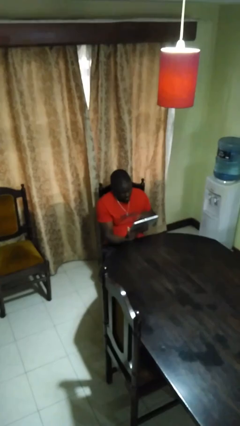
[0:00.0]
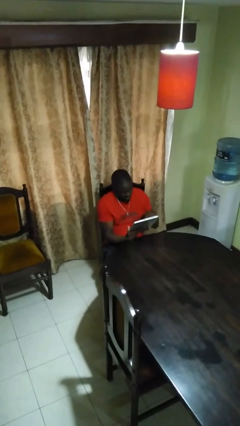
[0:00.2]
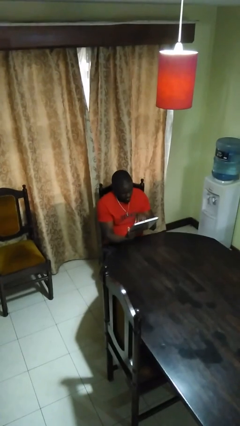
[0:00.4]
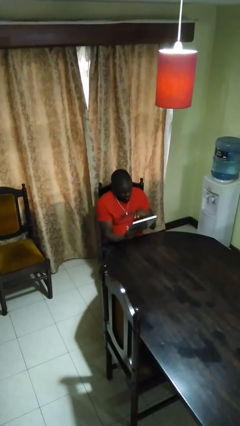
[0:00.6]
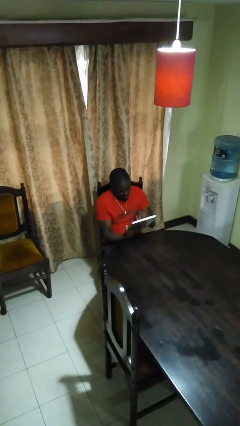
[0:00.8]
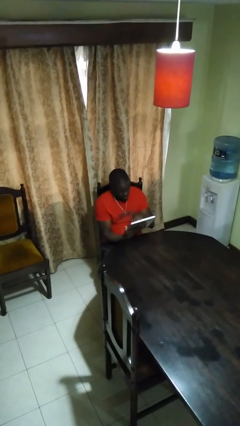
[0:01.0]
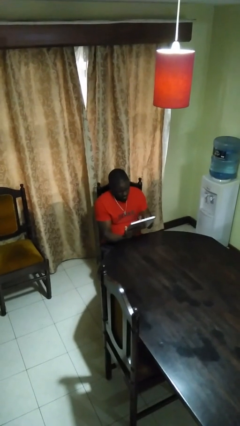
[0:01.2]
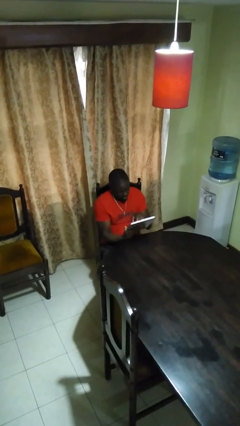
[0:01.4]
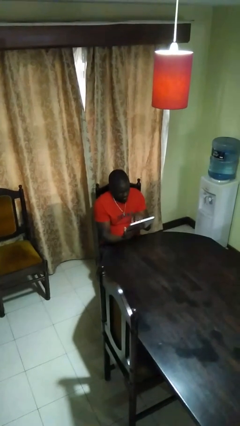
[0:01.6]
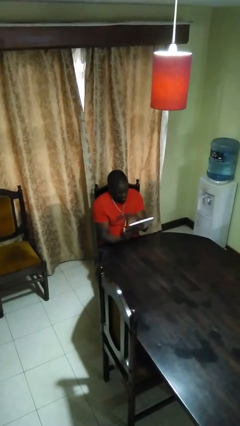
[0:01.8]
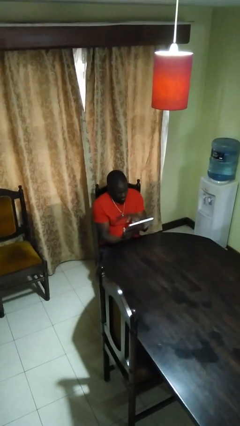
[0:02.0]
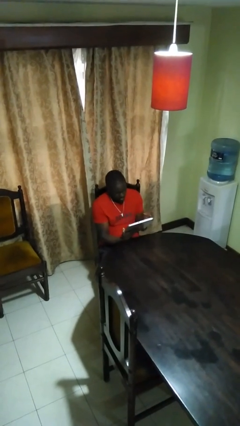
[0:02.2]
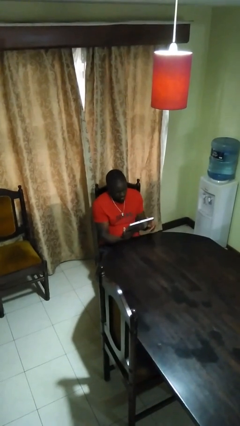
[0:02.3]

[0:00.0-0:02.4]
person interacts with tablet

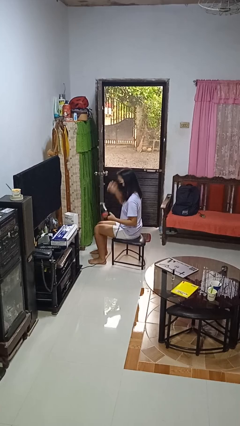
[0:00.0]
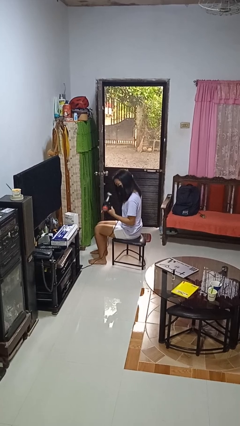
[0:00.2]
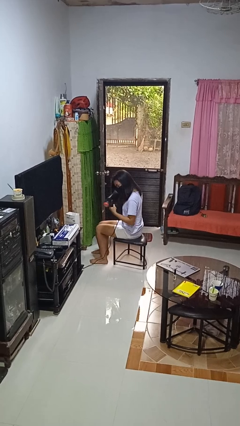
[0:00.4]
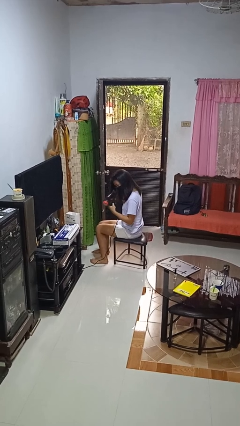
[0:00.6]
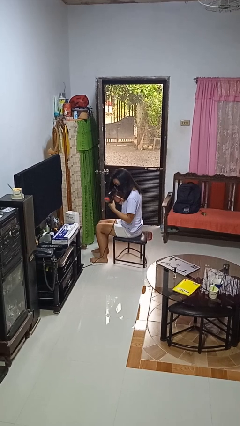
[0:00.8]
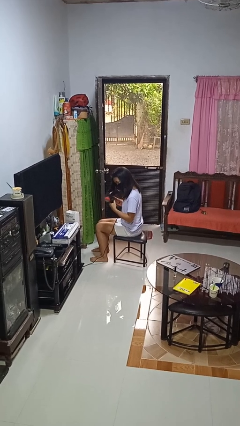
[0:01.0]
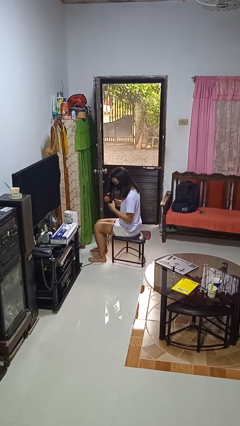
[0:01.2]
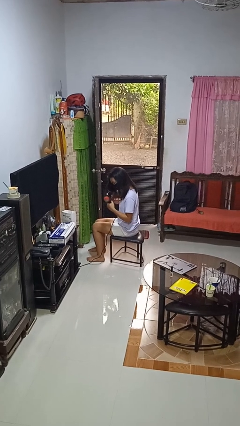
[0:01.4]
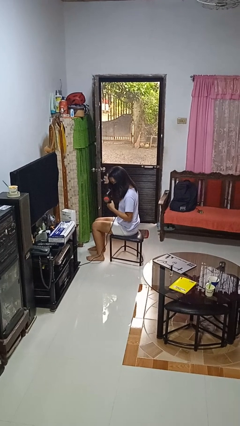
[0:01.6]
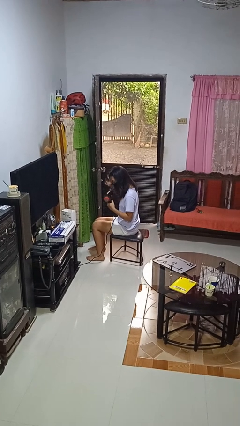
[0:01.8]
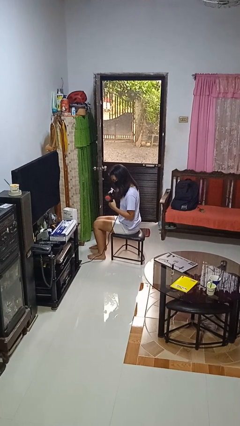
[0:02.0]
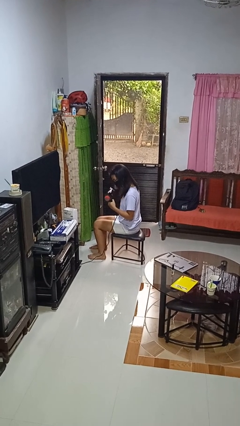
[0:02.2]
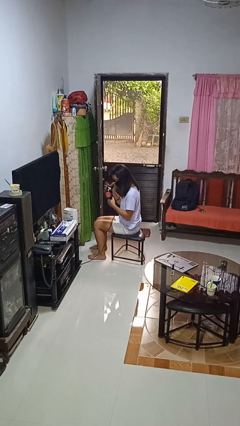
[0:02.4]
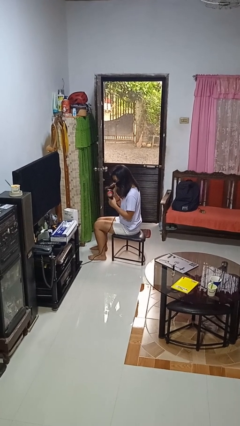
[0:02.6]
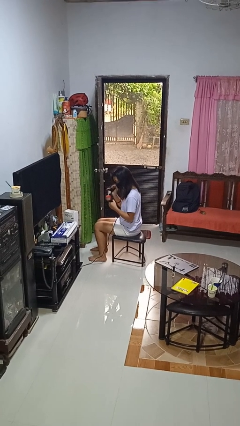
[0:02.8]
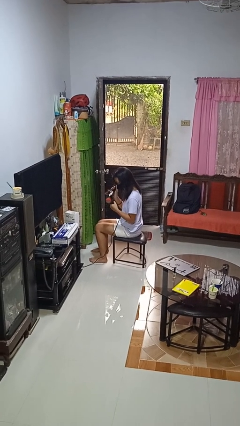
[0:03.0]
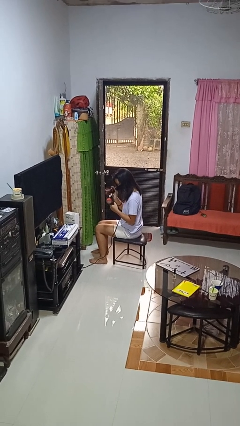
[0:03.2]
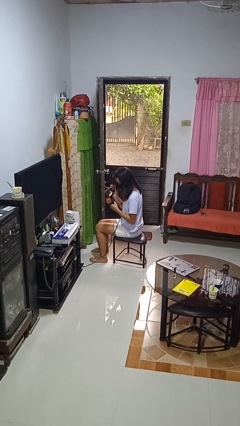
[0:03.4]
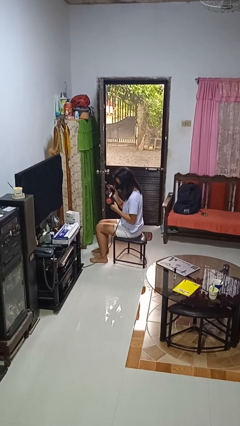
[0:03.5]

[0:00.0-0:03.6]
person dries hair with hairdryer

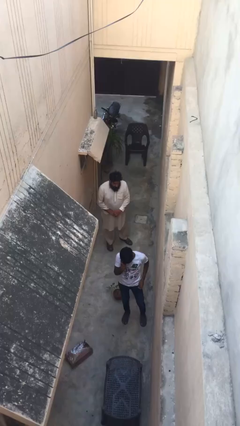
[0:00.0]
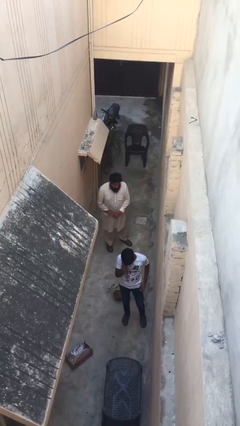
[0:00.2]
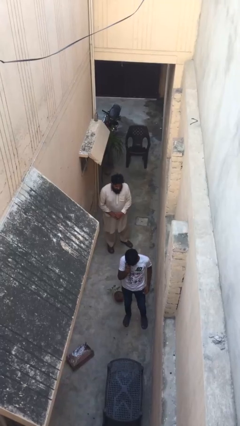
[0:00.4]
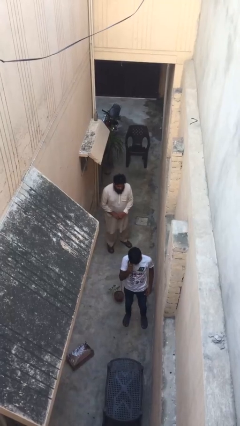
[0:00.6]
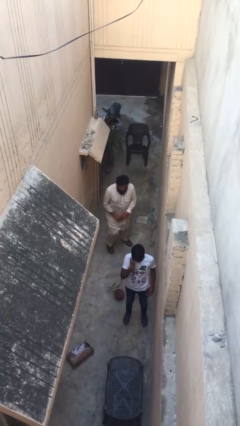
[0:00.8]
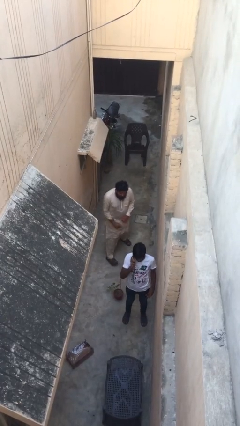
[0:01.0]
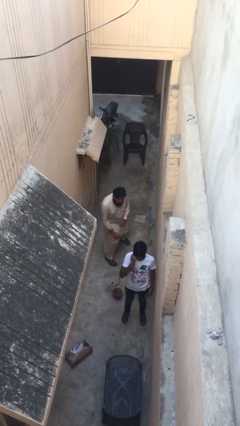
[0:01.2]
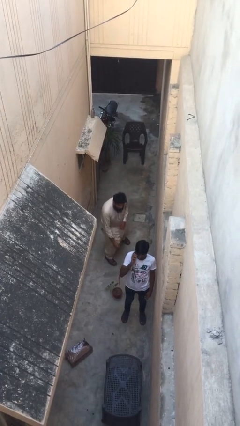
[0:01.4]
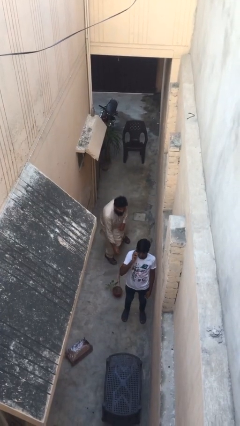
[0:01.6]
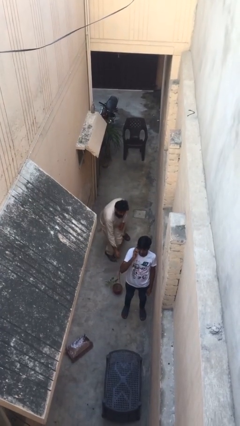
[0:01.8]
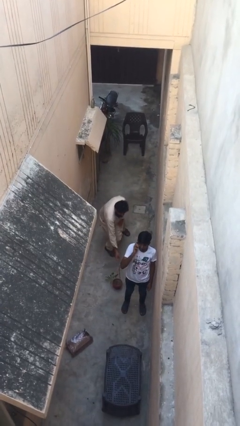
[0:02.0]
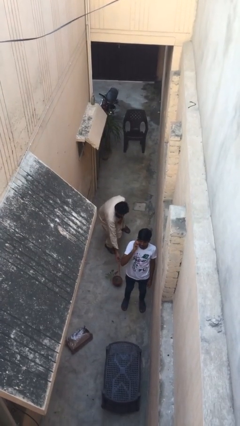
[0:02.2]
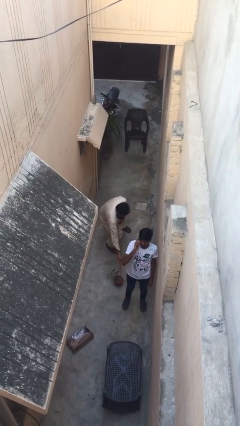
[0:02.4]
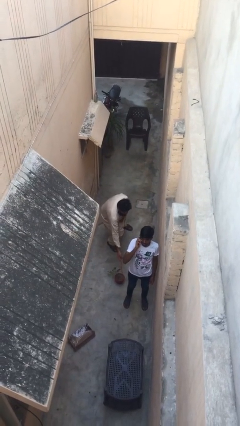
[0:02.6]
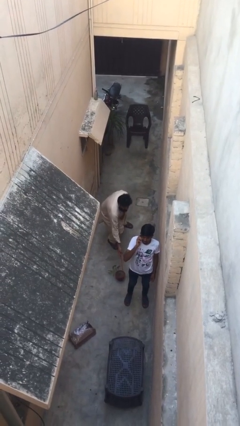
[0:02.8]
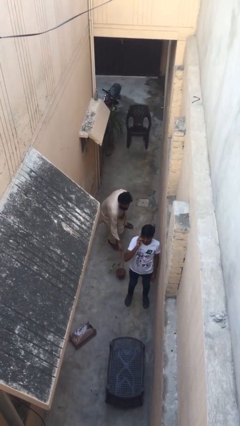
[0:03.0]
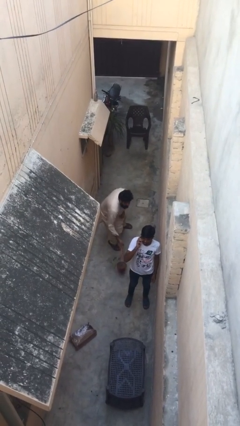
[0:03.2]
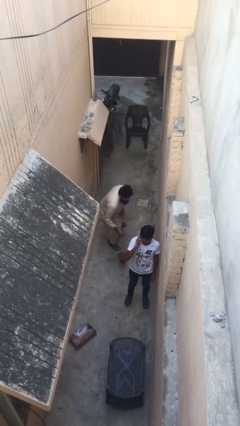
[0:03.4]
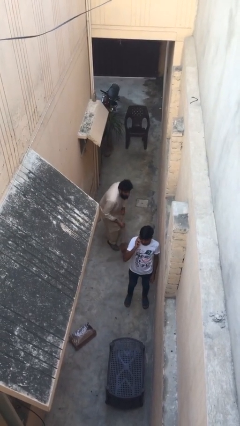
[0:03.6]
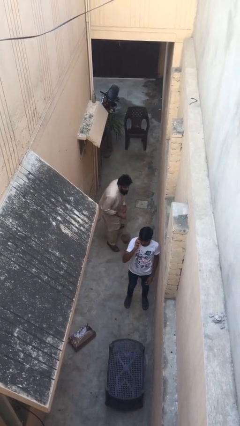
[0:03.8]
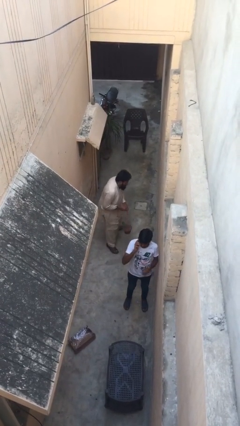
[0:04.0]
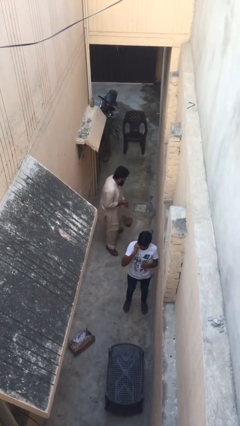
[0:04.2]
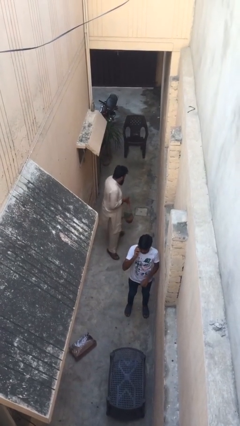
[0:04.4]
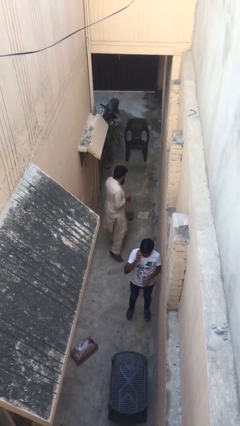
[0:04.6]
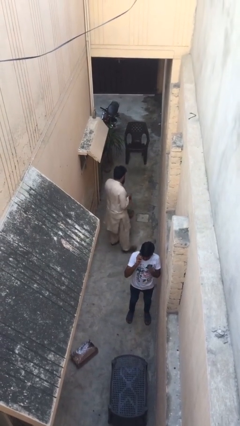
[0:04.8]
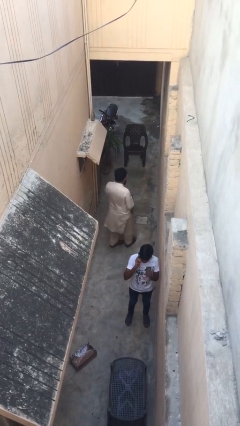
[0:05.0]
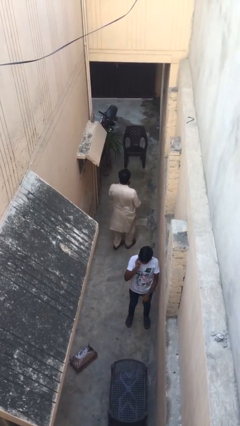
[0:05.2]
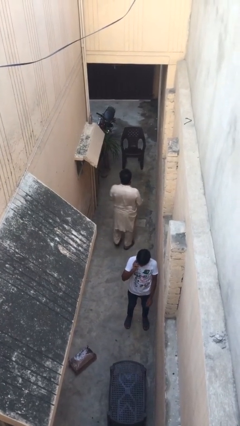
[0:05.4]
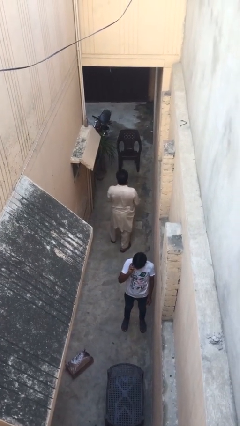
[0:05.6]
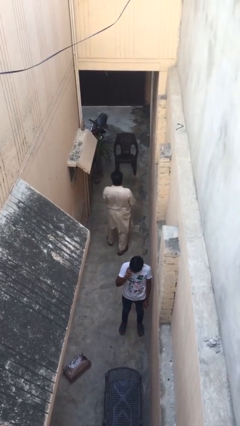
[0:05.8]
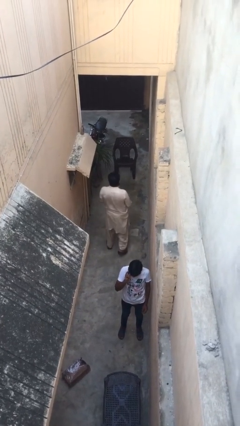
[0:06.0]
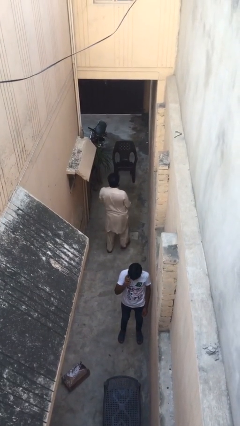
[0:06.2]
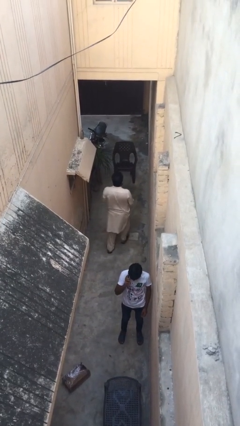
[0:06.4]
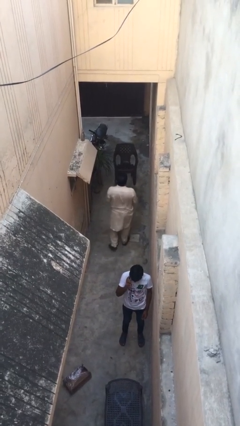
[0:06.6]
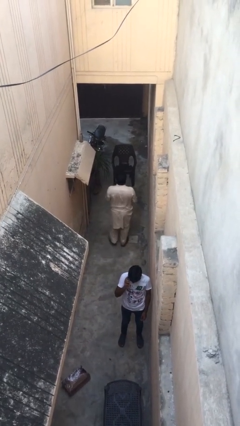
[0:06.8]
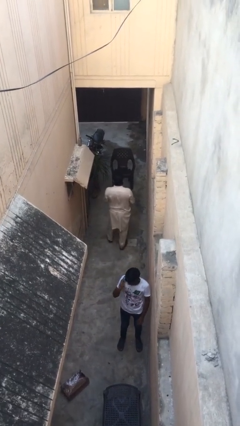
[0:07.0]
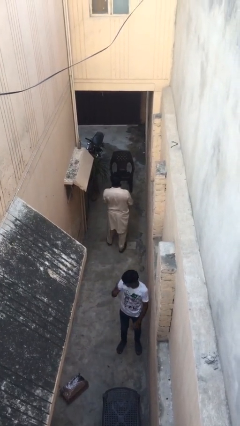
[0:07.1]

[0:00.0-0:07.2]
person steals object from person

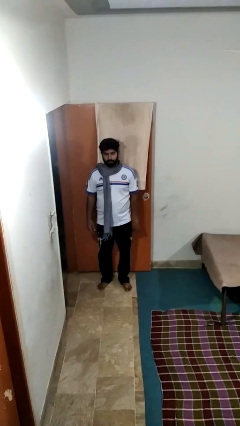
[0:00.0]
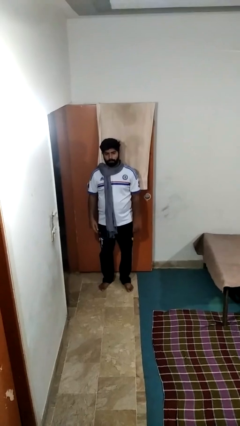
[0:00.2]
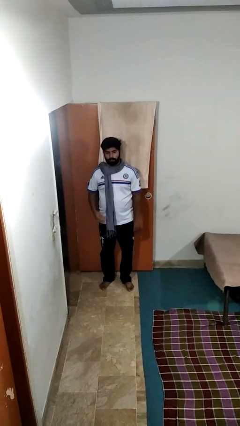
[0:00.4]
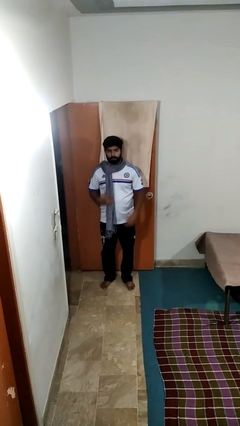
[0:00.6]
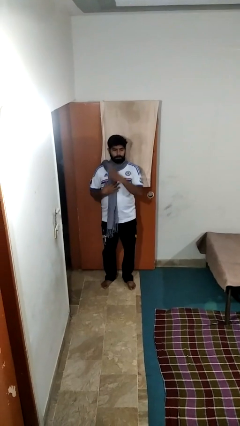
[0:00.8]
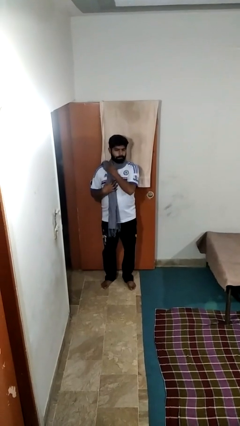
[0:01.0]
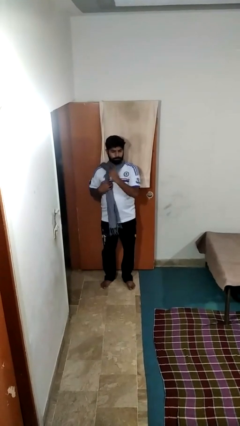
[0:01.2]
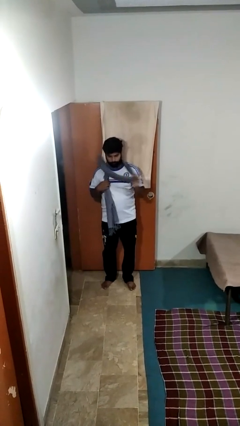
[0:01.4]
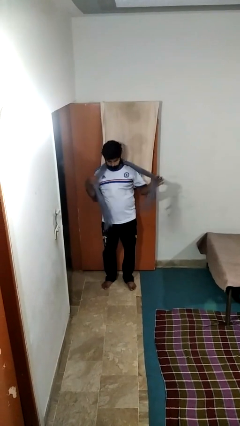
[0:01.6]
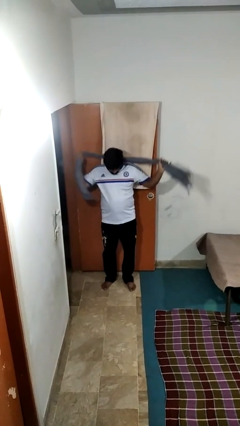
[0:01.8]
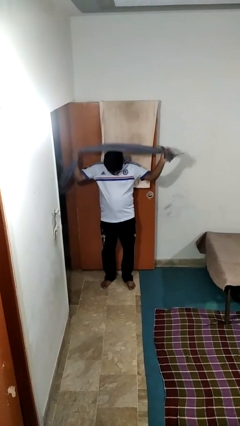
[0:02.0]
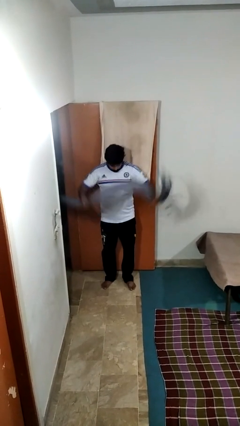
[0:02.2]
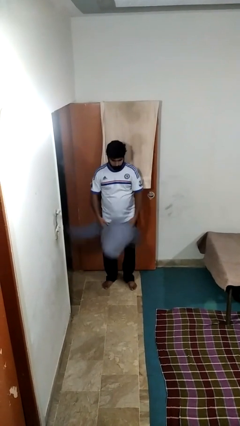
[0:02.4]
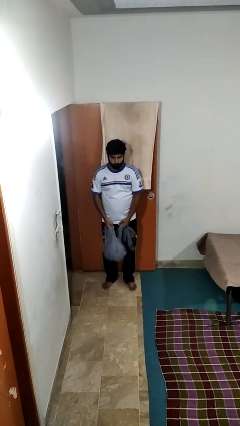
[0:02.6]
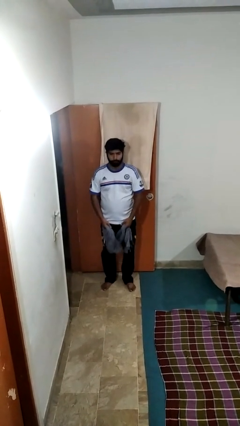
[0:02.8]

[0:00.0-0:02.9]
person takes off scarf

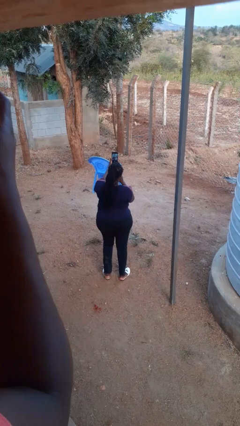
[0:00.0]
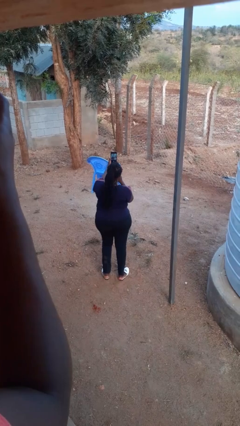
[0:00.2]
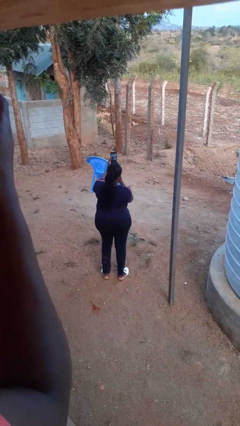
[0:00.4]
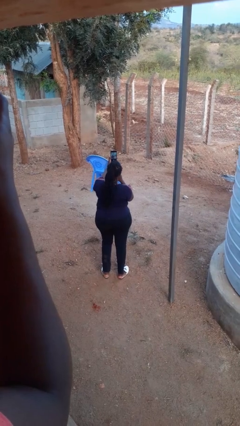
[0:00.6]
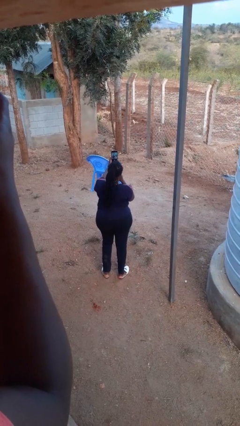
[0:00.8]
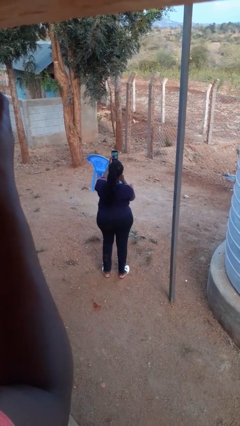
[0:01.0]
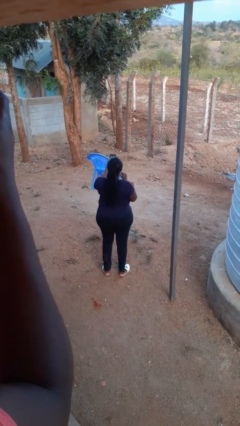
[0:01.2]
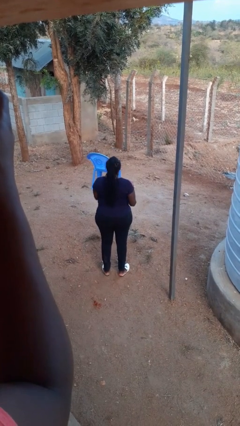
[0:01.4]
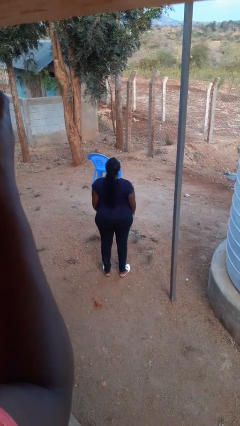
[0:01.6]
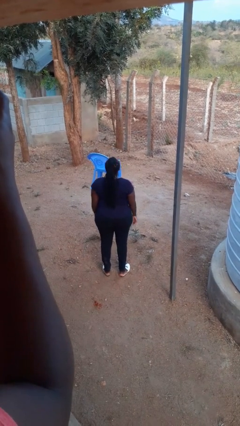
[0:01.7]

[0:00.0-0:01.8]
person takes selfie
